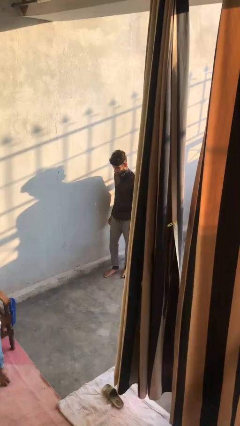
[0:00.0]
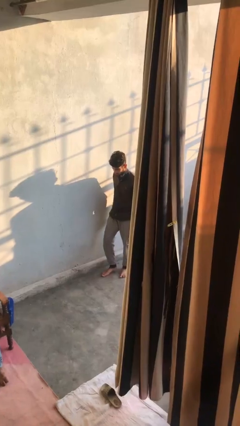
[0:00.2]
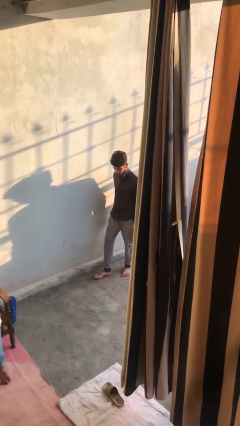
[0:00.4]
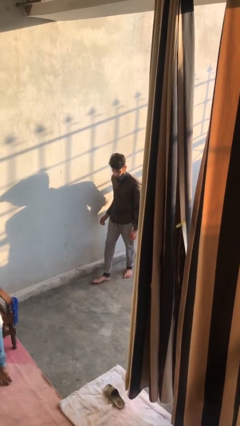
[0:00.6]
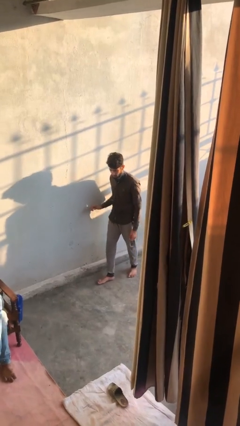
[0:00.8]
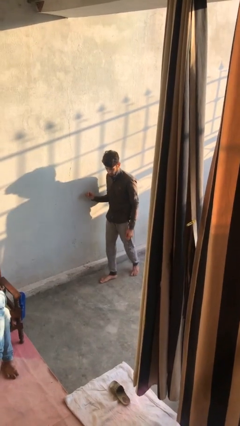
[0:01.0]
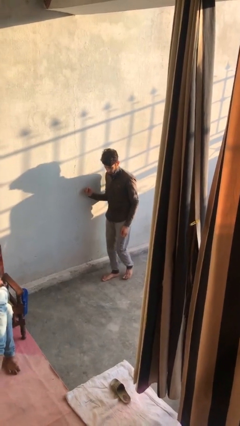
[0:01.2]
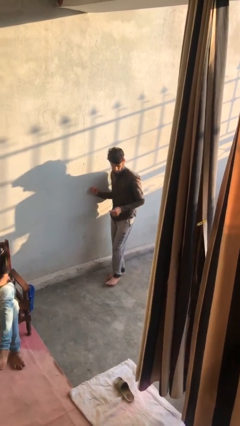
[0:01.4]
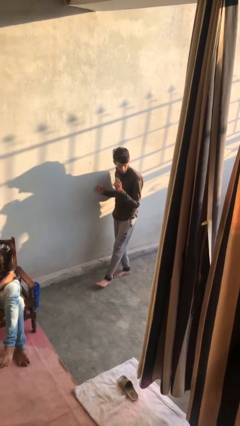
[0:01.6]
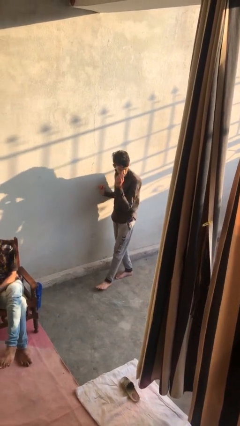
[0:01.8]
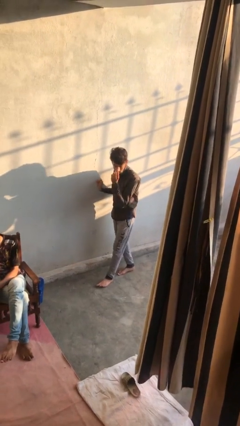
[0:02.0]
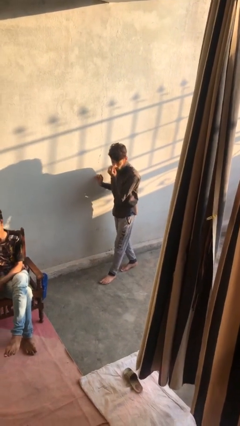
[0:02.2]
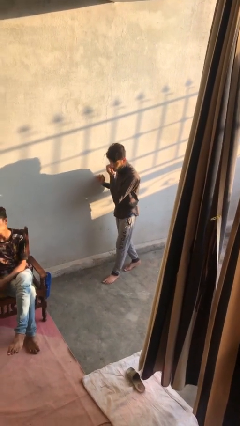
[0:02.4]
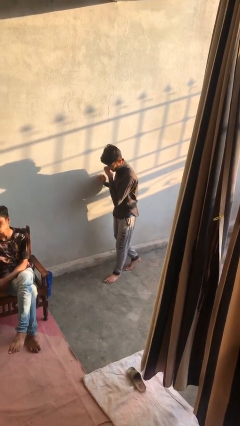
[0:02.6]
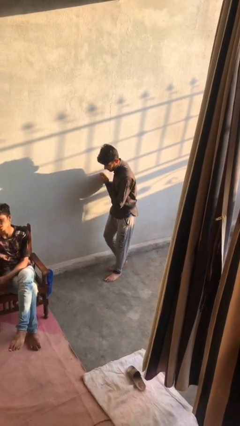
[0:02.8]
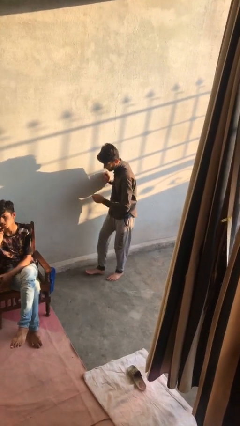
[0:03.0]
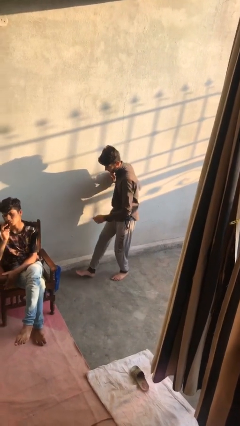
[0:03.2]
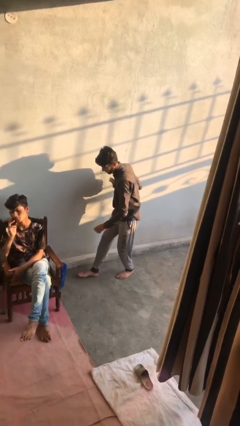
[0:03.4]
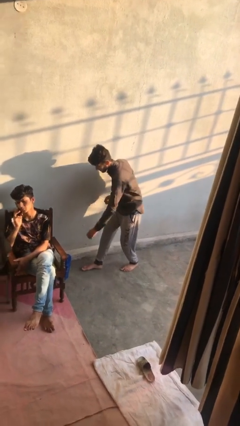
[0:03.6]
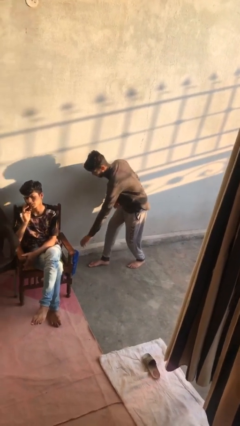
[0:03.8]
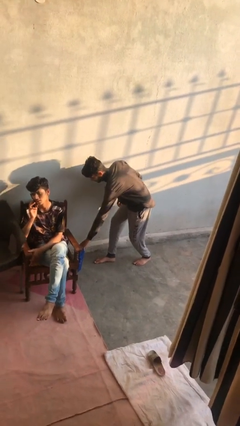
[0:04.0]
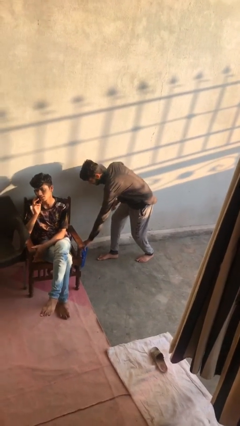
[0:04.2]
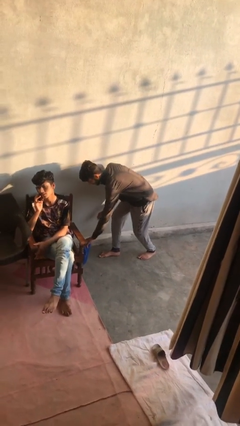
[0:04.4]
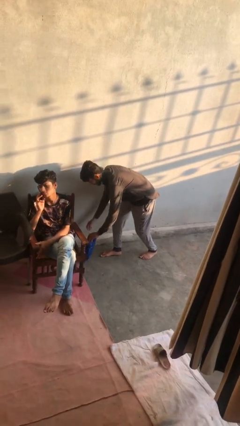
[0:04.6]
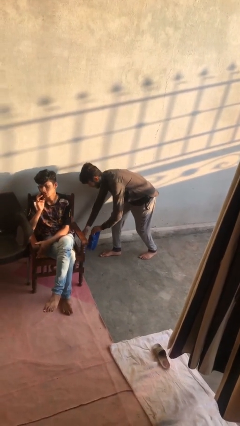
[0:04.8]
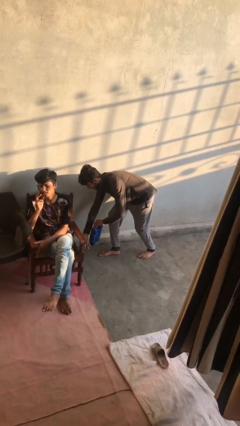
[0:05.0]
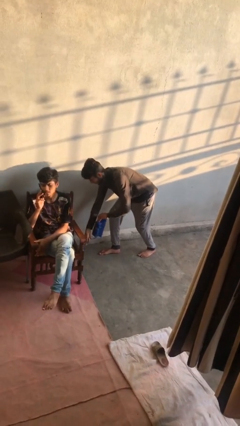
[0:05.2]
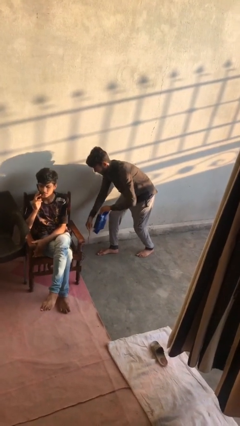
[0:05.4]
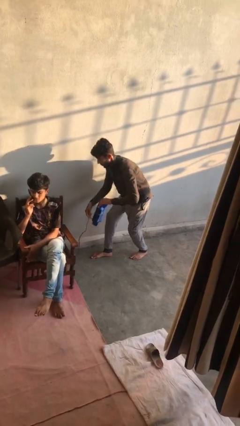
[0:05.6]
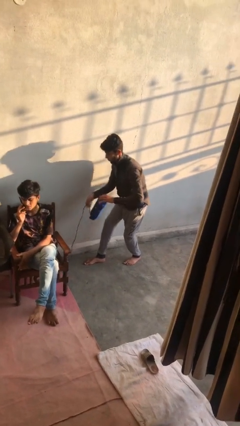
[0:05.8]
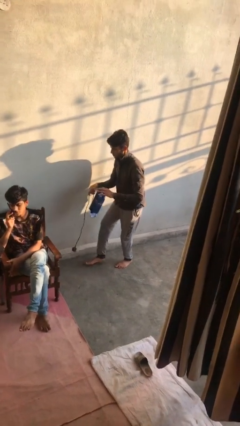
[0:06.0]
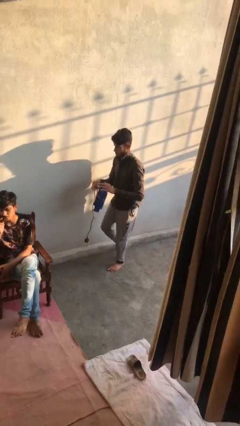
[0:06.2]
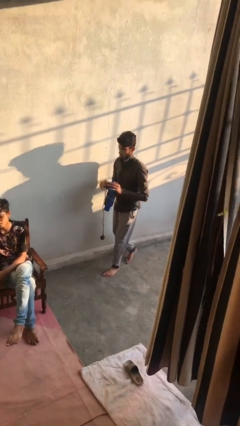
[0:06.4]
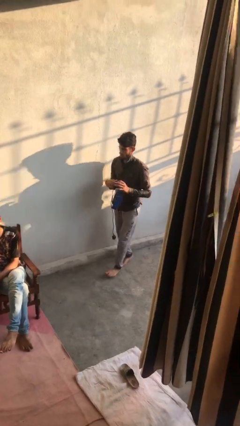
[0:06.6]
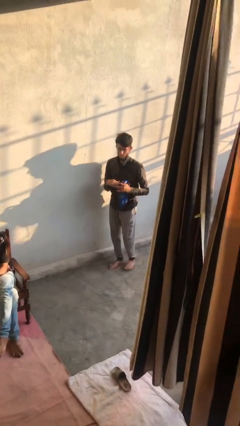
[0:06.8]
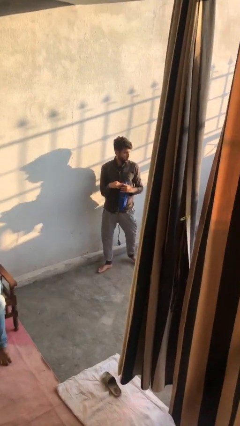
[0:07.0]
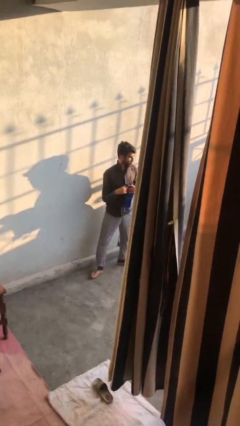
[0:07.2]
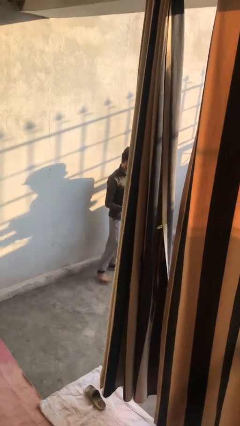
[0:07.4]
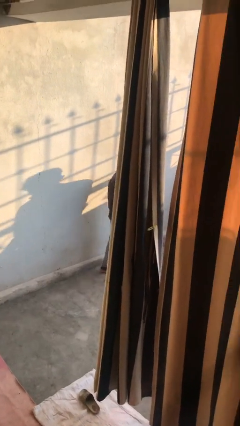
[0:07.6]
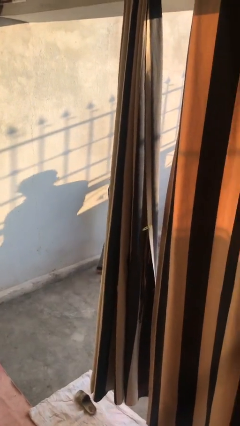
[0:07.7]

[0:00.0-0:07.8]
person steals object from person

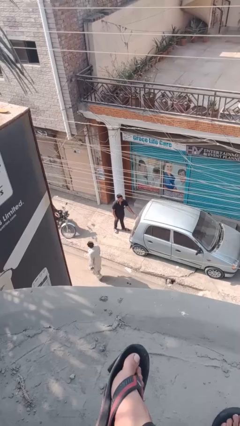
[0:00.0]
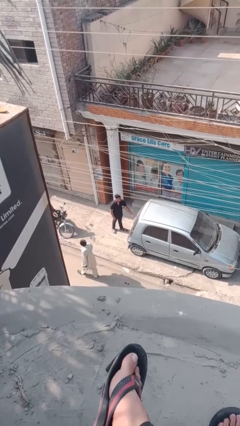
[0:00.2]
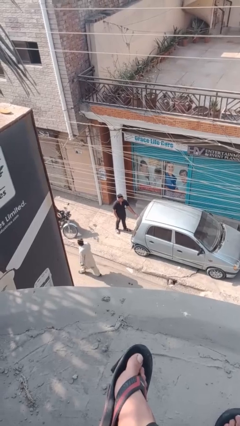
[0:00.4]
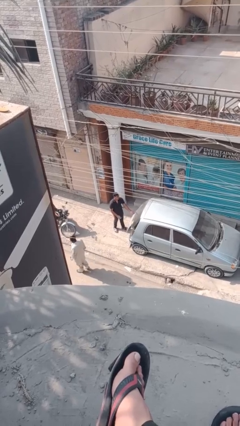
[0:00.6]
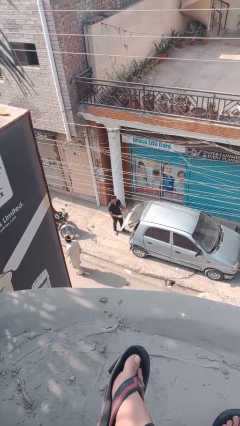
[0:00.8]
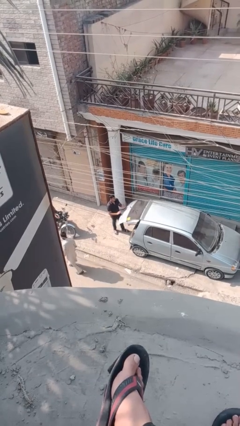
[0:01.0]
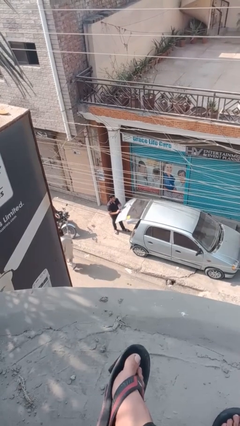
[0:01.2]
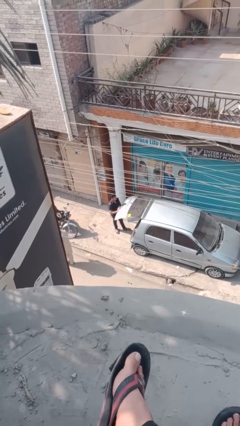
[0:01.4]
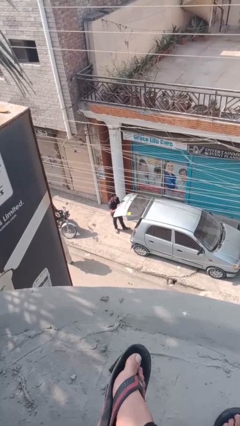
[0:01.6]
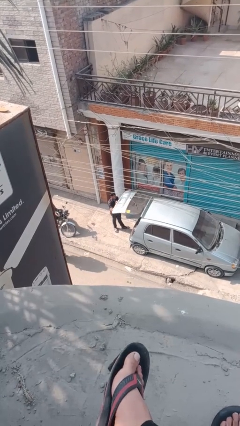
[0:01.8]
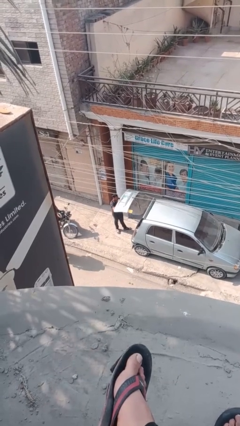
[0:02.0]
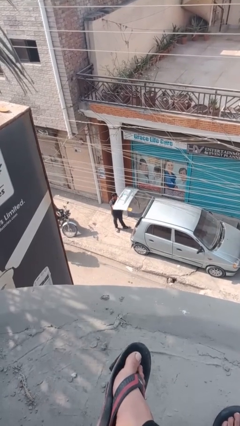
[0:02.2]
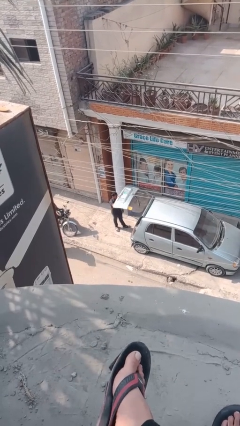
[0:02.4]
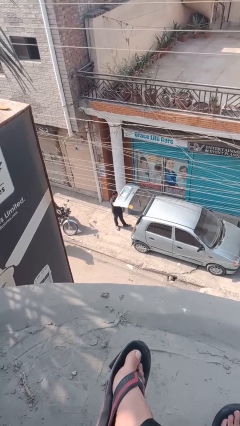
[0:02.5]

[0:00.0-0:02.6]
person opens car trunk

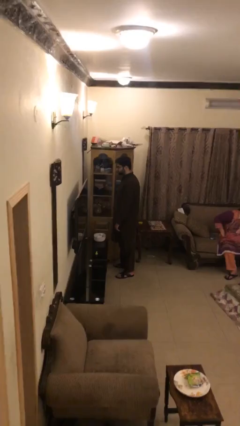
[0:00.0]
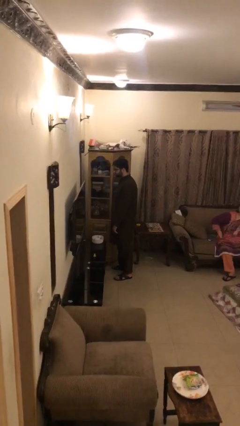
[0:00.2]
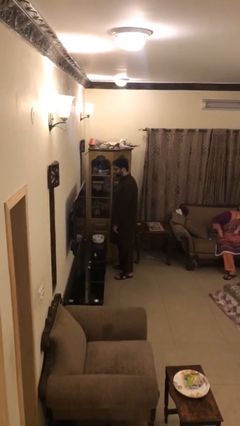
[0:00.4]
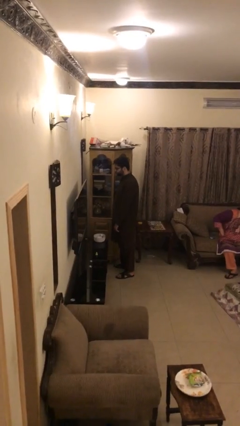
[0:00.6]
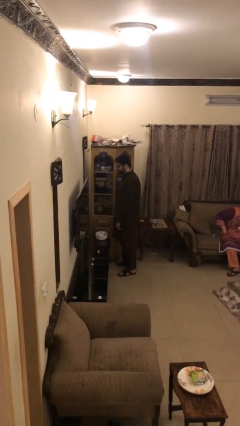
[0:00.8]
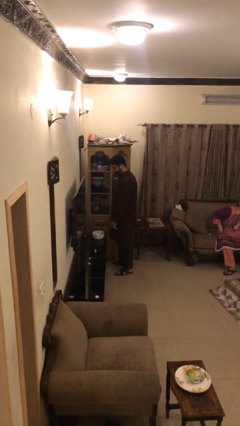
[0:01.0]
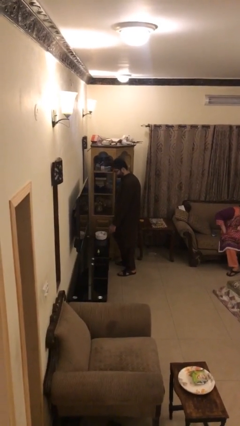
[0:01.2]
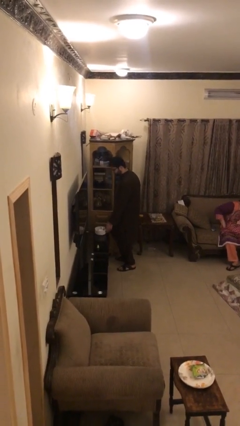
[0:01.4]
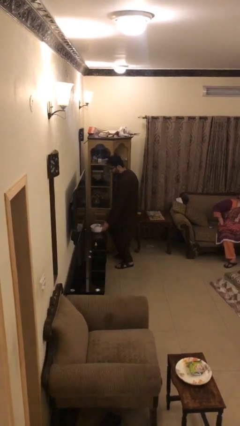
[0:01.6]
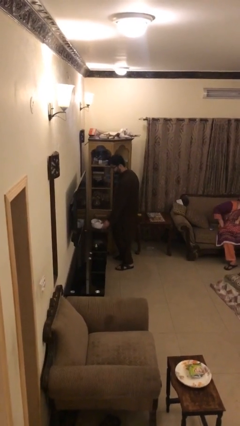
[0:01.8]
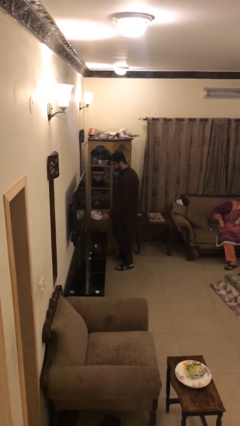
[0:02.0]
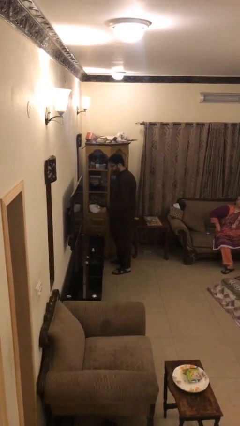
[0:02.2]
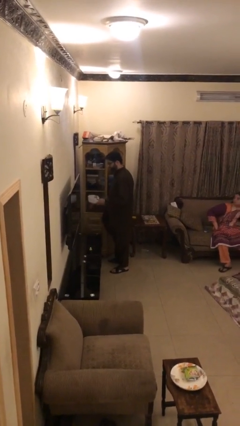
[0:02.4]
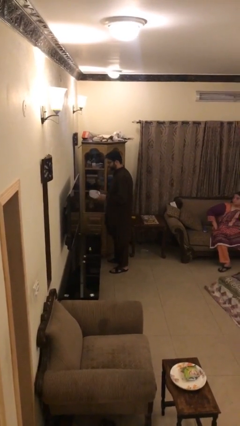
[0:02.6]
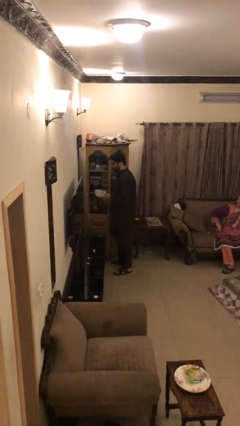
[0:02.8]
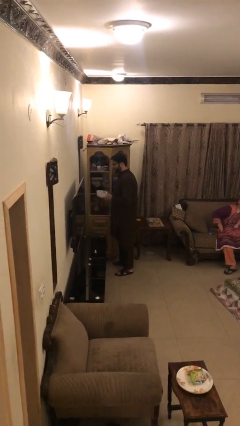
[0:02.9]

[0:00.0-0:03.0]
person picks up object from table

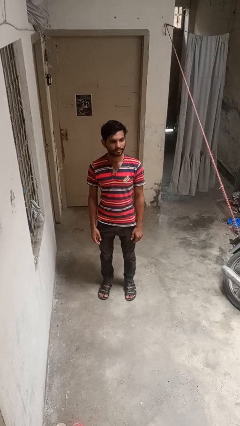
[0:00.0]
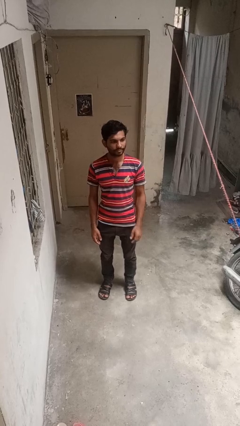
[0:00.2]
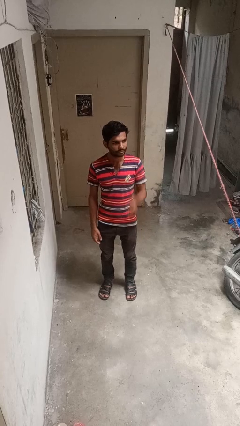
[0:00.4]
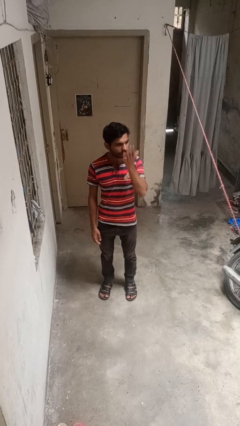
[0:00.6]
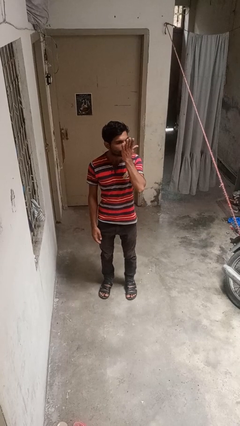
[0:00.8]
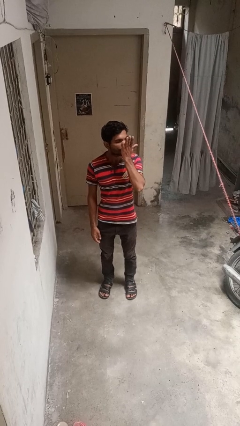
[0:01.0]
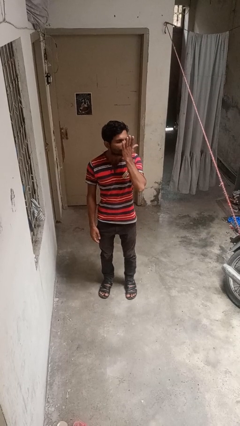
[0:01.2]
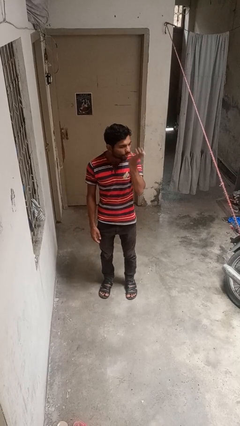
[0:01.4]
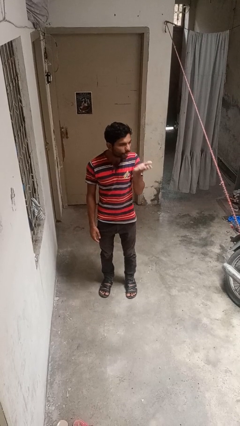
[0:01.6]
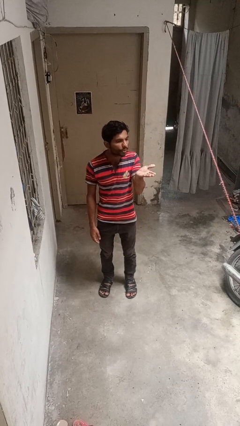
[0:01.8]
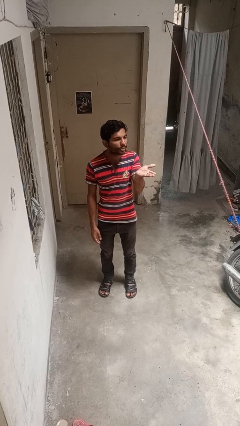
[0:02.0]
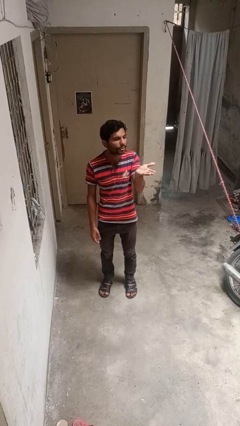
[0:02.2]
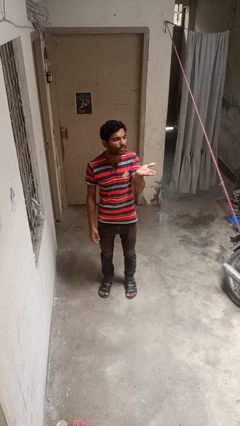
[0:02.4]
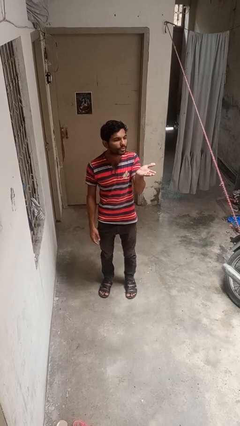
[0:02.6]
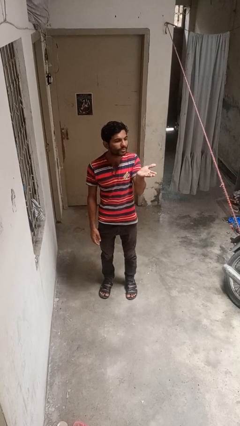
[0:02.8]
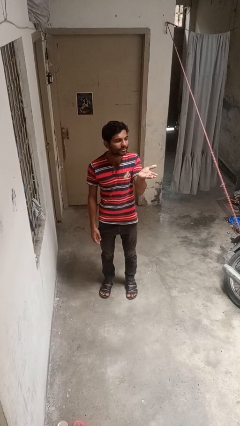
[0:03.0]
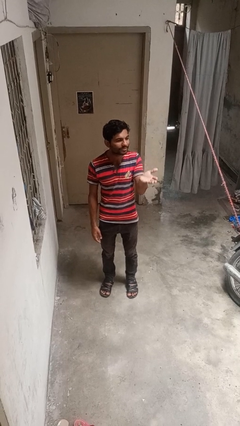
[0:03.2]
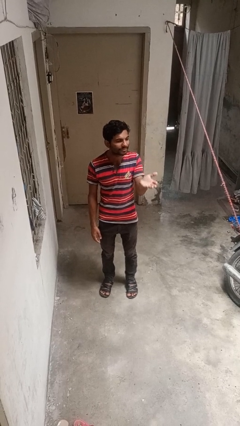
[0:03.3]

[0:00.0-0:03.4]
person gestures blow kiss

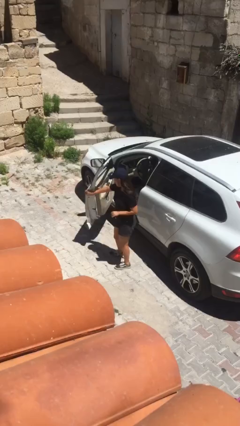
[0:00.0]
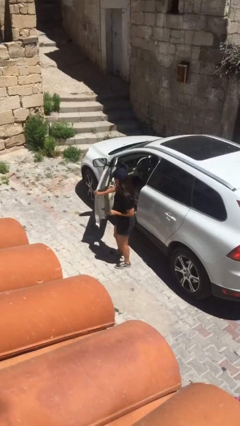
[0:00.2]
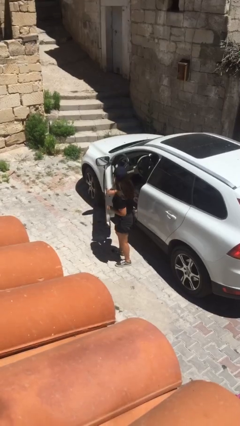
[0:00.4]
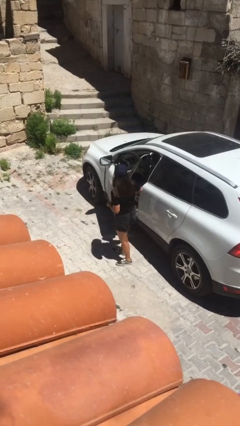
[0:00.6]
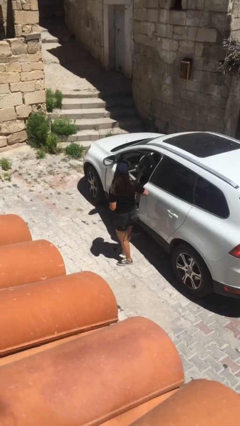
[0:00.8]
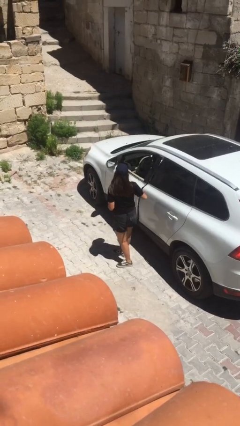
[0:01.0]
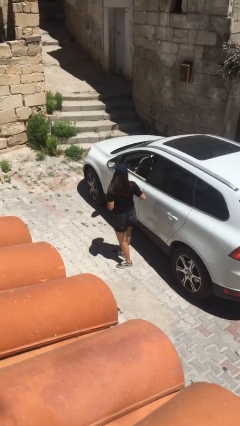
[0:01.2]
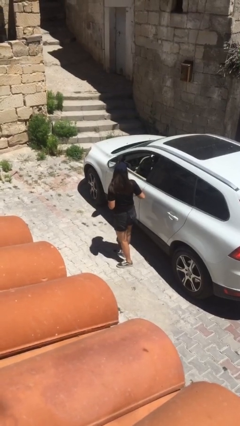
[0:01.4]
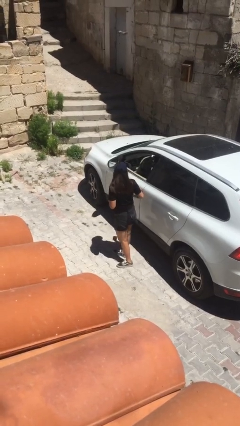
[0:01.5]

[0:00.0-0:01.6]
person closes car door
